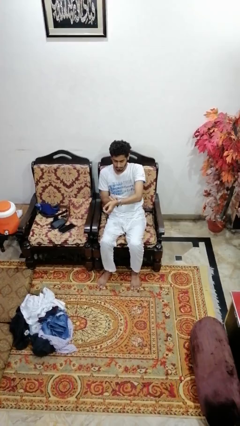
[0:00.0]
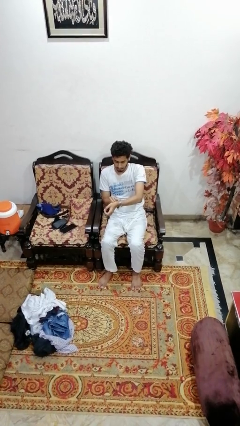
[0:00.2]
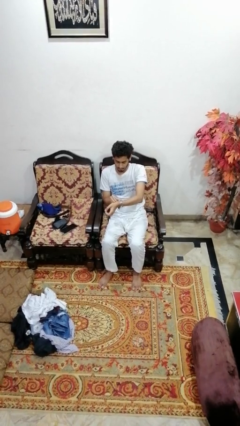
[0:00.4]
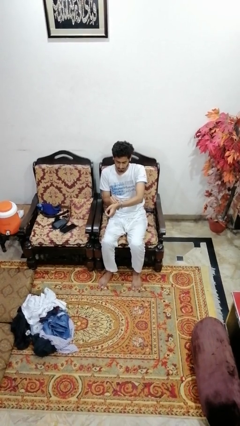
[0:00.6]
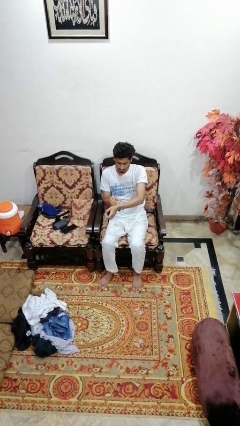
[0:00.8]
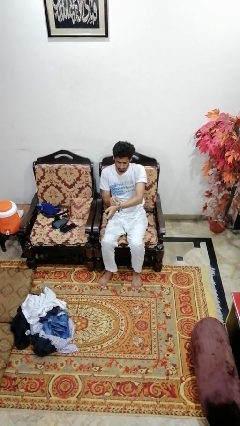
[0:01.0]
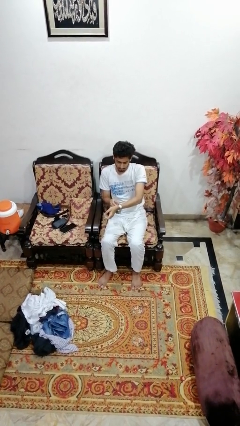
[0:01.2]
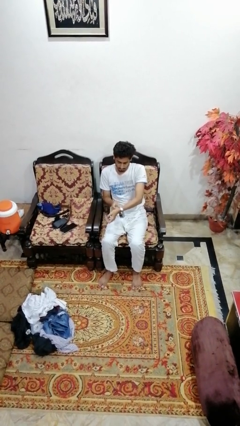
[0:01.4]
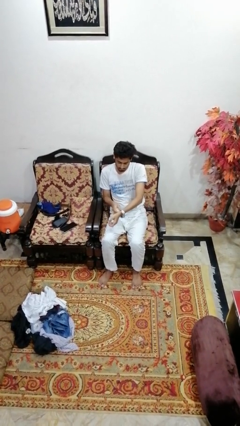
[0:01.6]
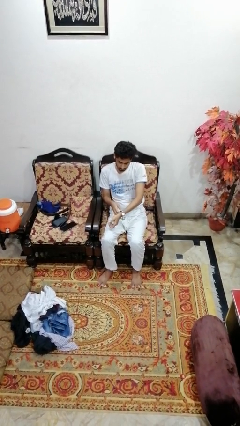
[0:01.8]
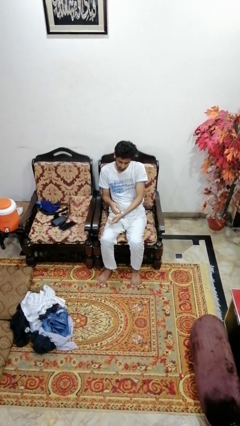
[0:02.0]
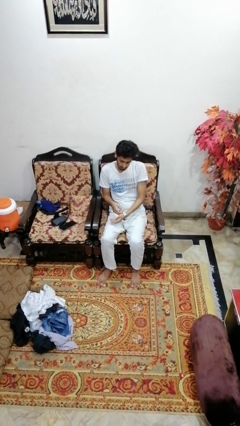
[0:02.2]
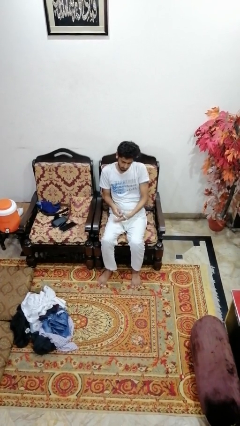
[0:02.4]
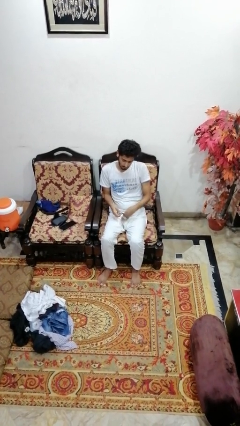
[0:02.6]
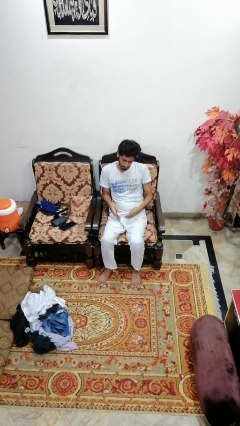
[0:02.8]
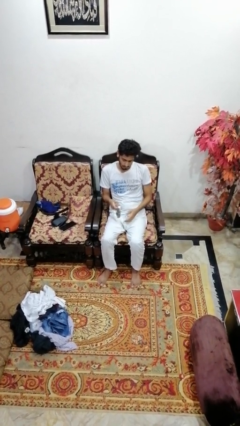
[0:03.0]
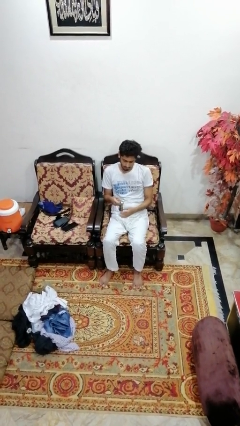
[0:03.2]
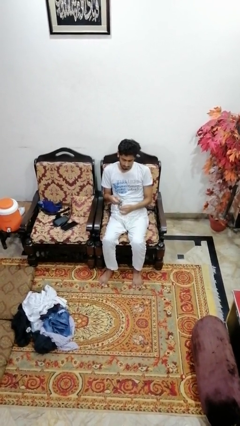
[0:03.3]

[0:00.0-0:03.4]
person takes off wristwatch

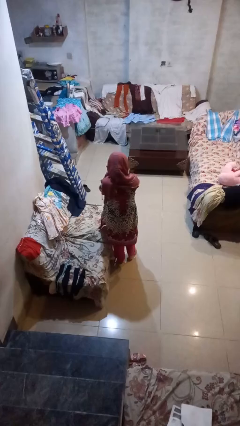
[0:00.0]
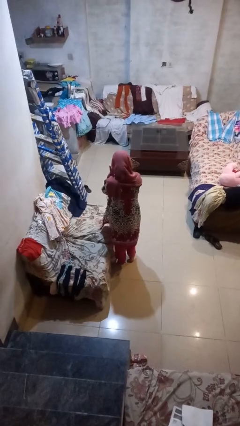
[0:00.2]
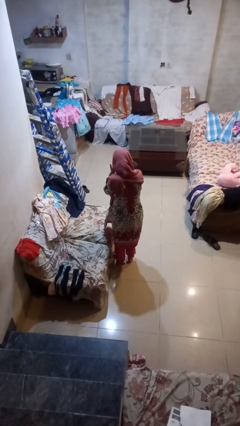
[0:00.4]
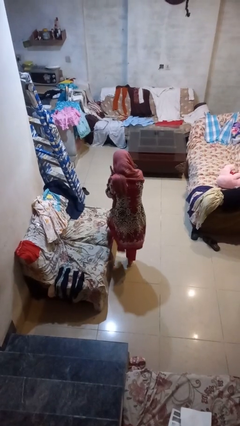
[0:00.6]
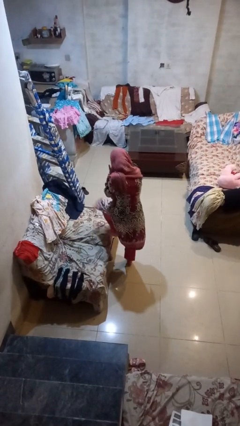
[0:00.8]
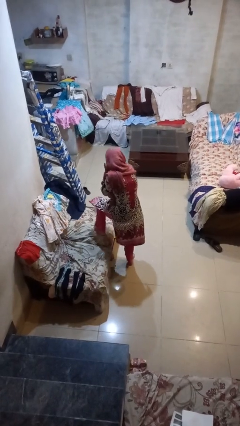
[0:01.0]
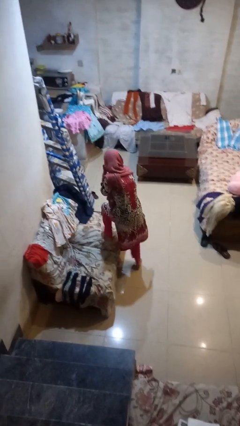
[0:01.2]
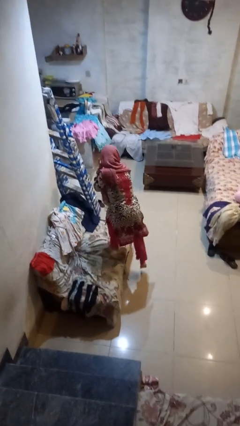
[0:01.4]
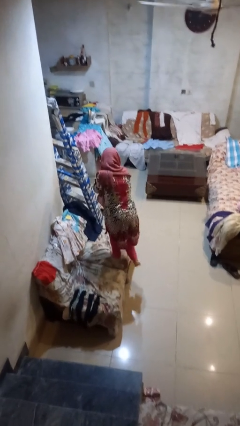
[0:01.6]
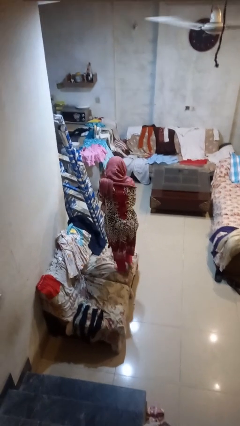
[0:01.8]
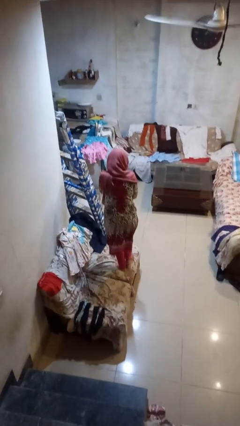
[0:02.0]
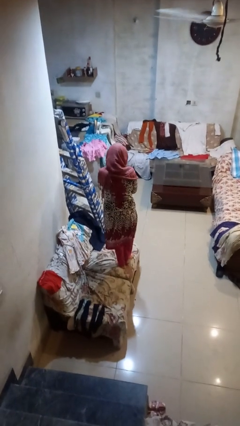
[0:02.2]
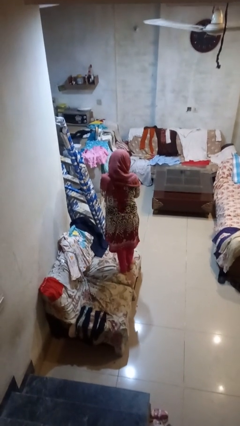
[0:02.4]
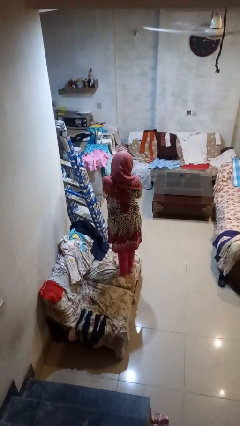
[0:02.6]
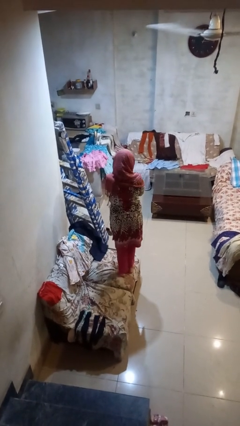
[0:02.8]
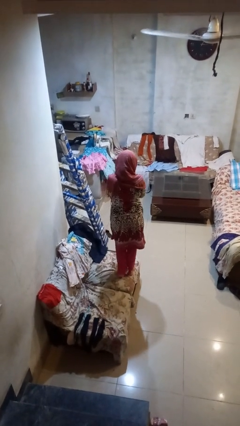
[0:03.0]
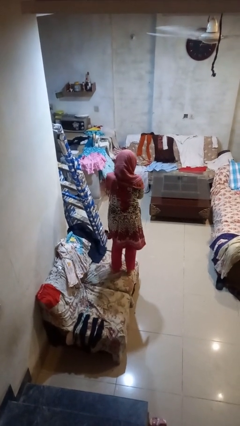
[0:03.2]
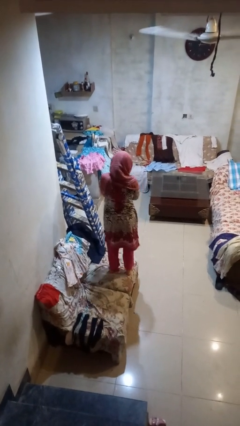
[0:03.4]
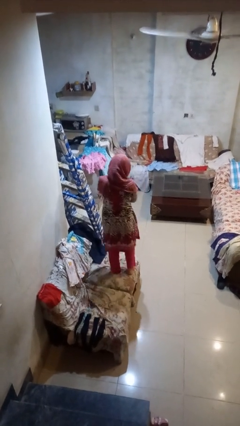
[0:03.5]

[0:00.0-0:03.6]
person climbs on couch

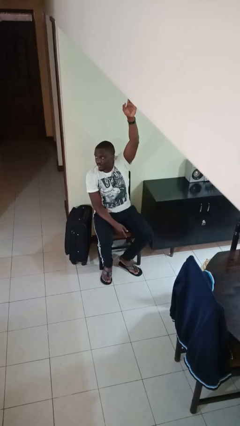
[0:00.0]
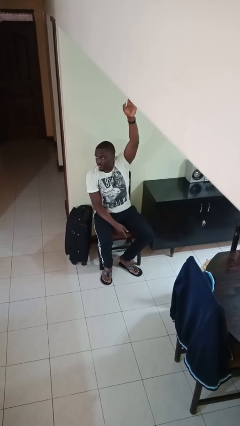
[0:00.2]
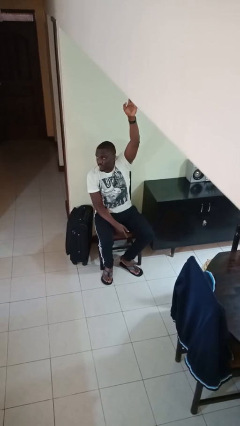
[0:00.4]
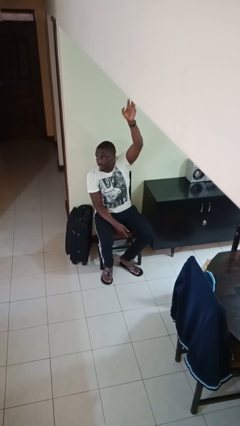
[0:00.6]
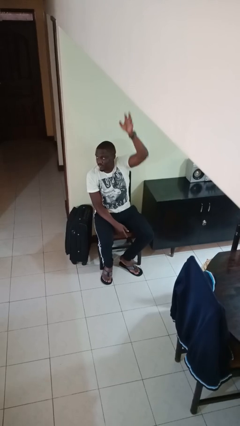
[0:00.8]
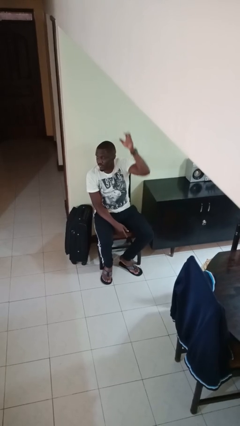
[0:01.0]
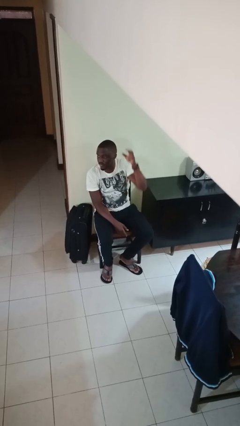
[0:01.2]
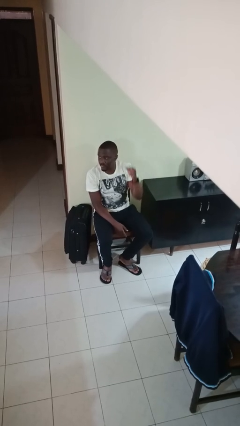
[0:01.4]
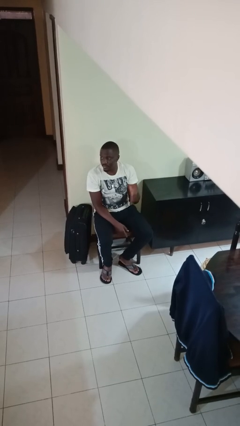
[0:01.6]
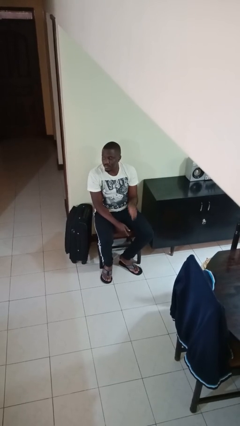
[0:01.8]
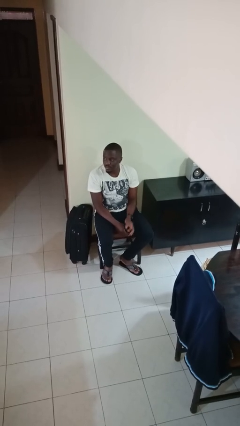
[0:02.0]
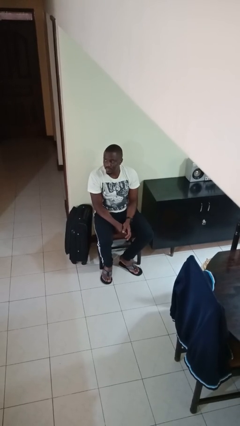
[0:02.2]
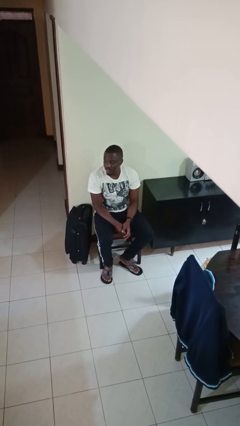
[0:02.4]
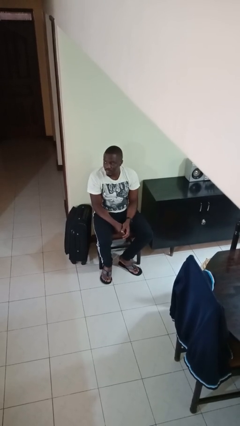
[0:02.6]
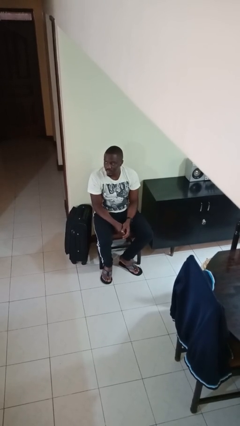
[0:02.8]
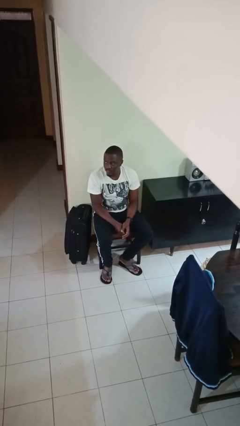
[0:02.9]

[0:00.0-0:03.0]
person gestures lower hand

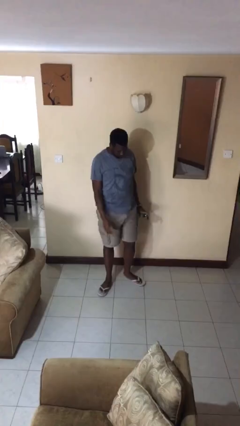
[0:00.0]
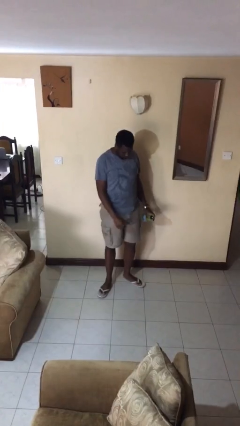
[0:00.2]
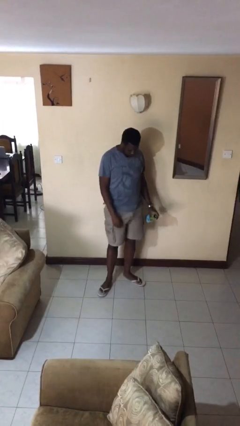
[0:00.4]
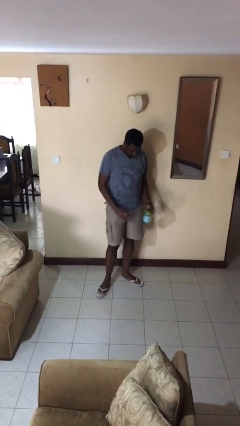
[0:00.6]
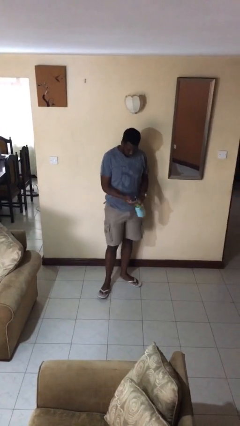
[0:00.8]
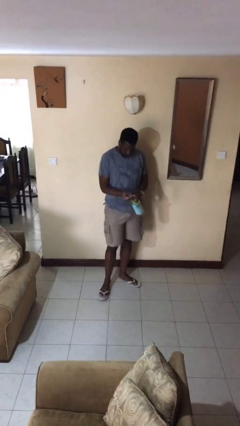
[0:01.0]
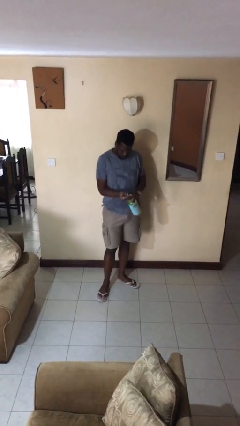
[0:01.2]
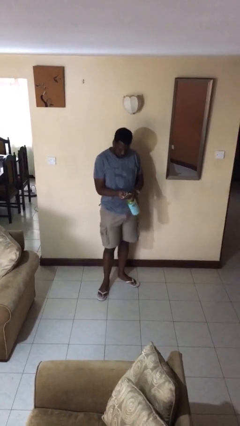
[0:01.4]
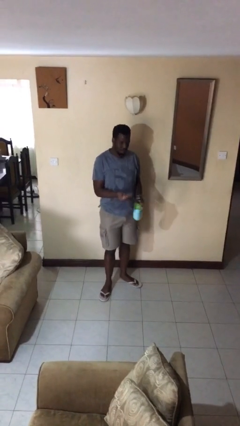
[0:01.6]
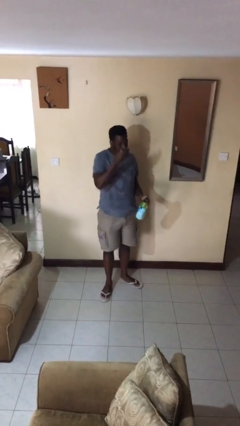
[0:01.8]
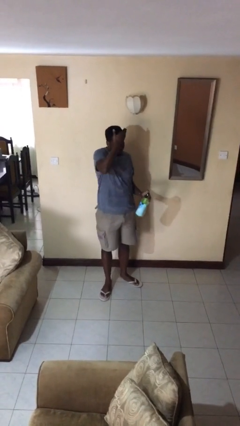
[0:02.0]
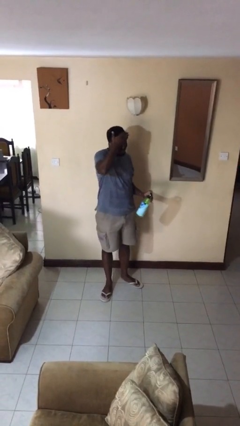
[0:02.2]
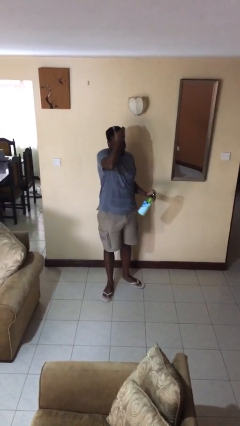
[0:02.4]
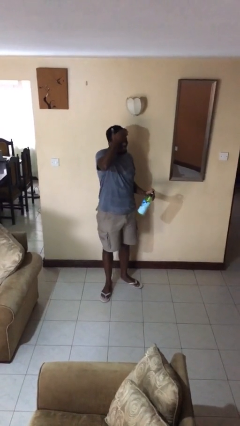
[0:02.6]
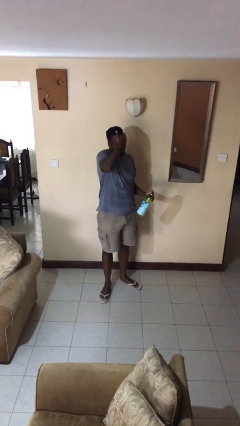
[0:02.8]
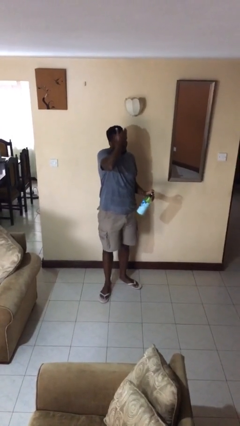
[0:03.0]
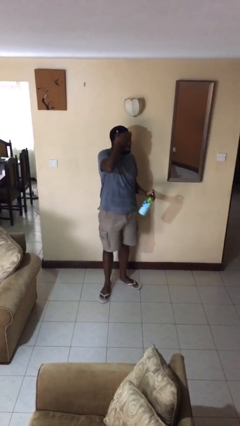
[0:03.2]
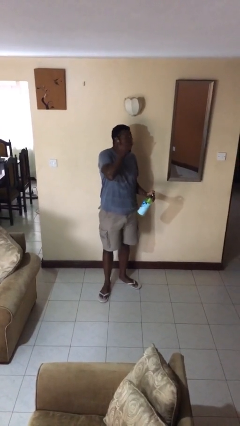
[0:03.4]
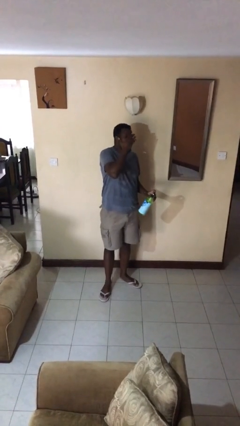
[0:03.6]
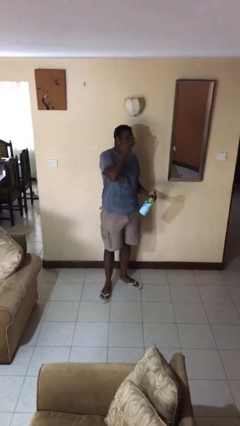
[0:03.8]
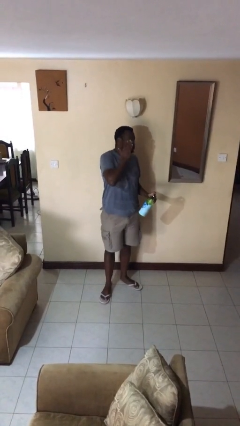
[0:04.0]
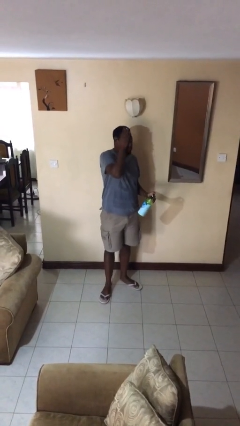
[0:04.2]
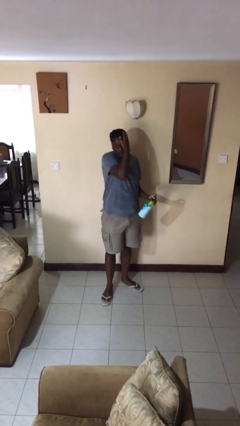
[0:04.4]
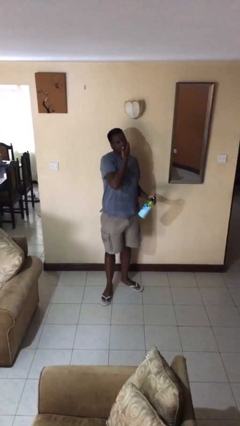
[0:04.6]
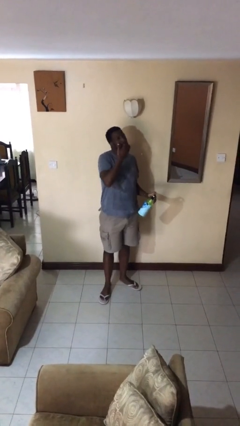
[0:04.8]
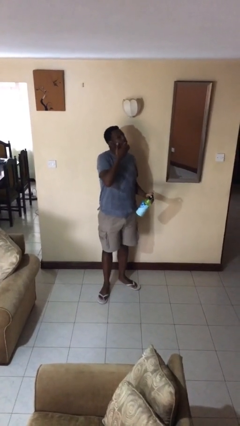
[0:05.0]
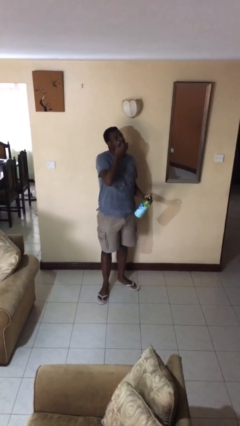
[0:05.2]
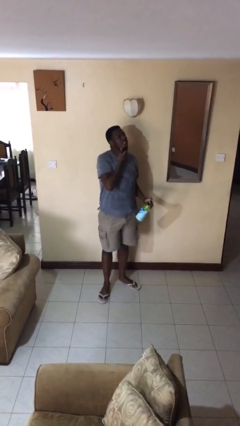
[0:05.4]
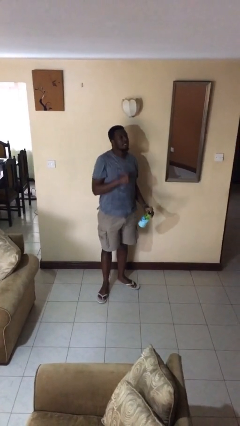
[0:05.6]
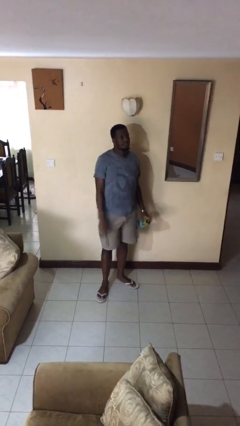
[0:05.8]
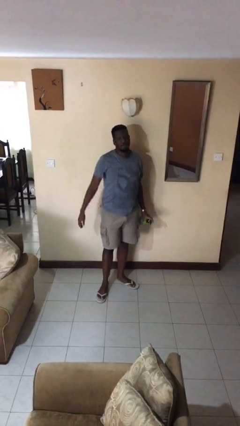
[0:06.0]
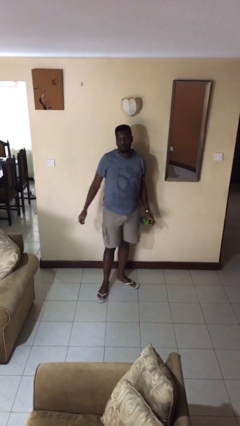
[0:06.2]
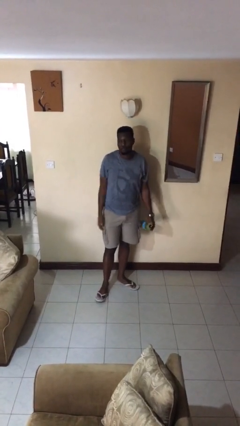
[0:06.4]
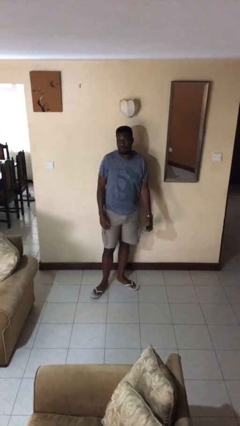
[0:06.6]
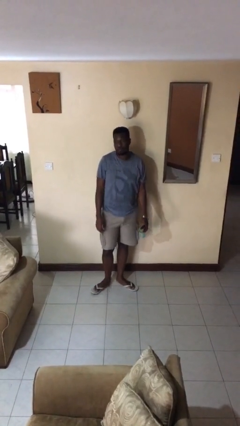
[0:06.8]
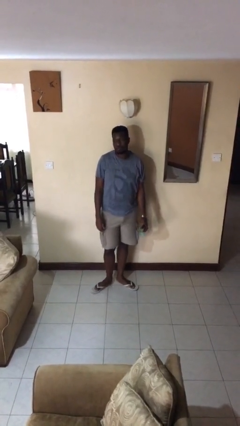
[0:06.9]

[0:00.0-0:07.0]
person applies sunscreen

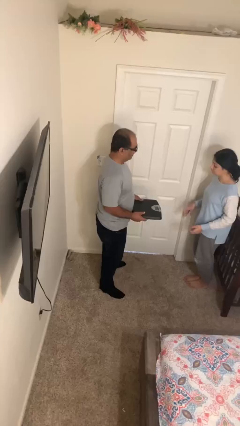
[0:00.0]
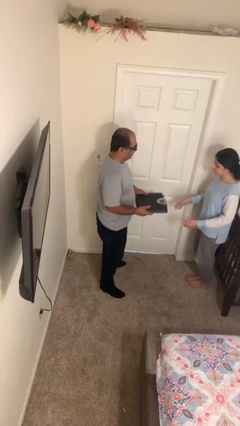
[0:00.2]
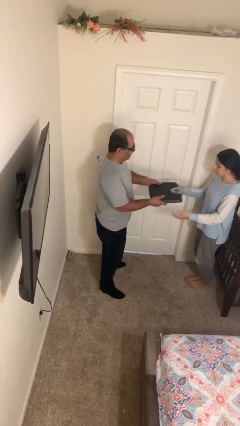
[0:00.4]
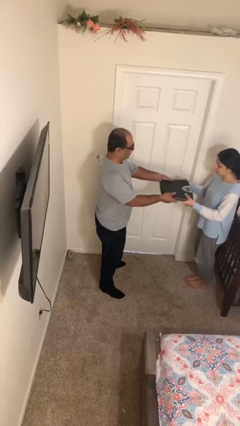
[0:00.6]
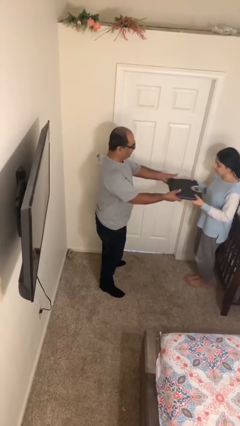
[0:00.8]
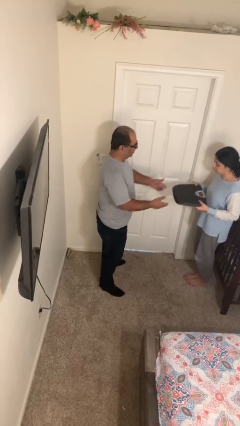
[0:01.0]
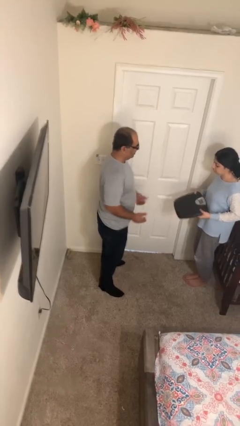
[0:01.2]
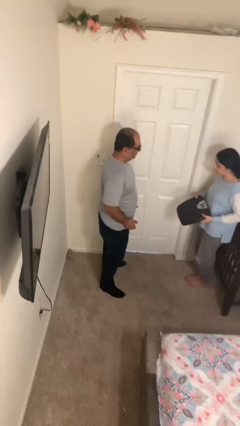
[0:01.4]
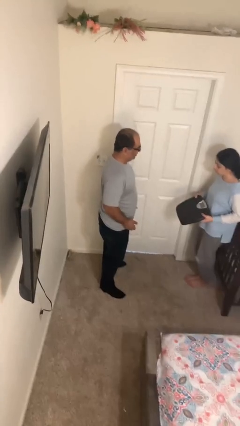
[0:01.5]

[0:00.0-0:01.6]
person transfers object to person
